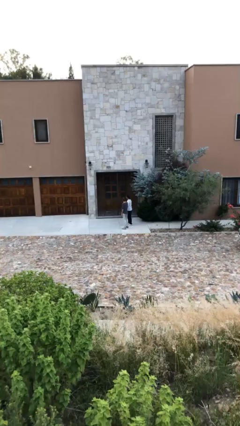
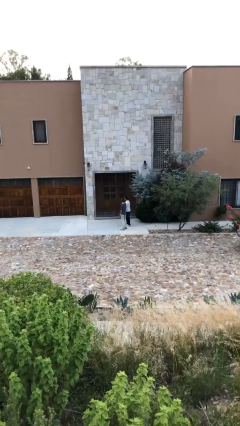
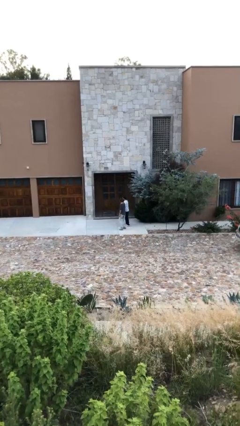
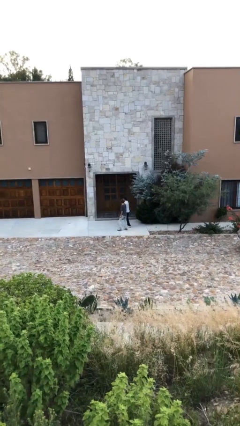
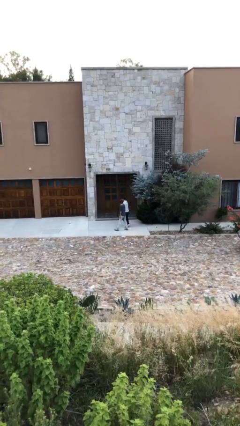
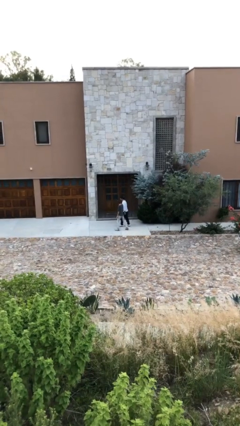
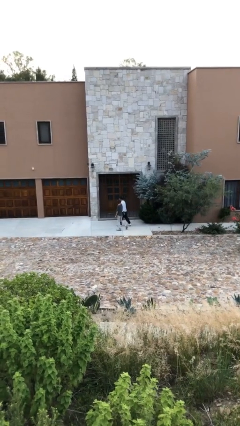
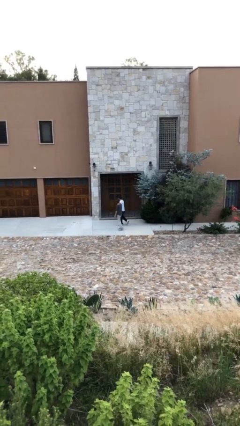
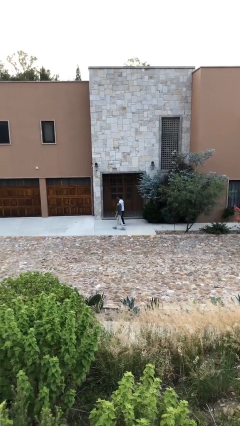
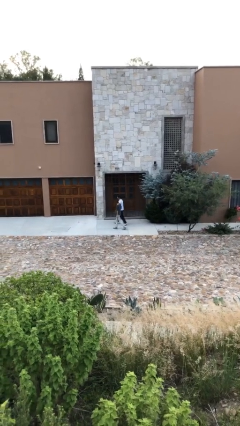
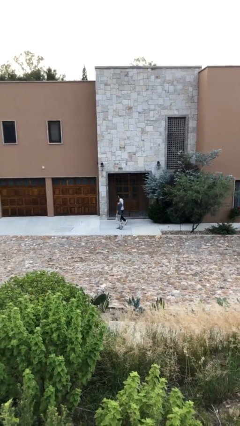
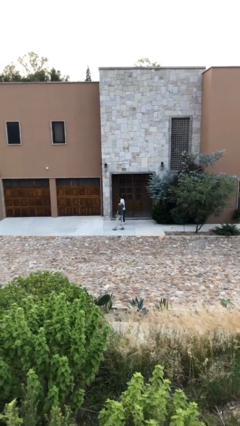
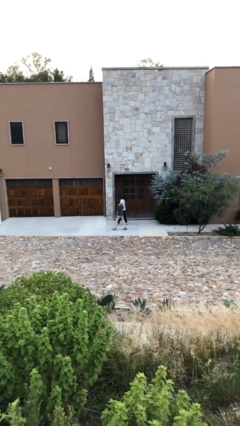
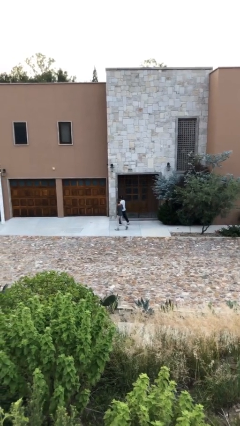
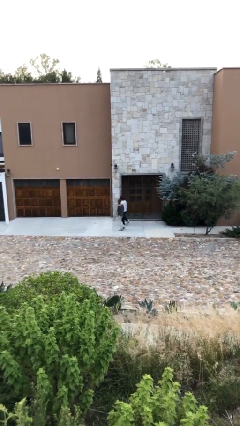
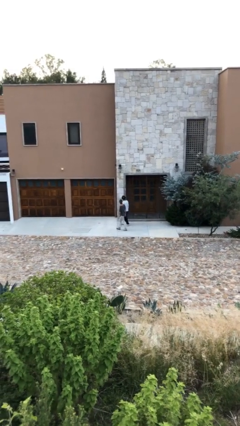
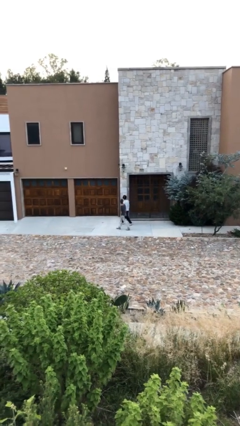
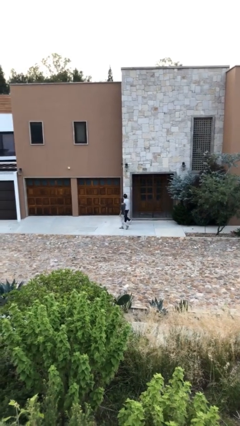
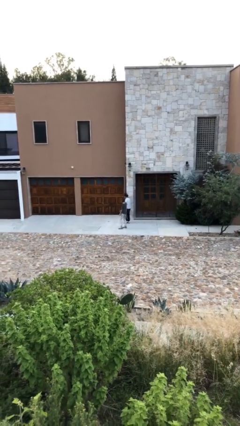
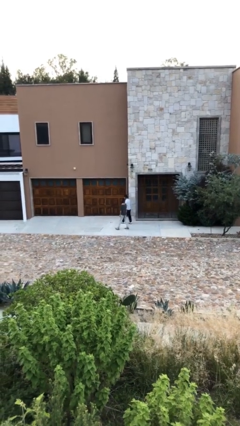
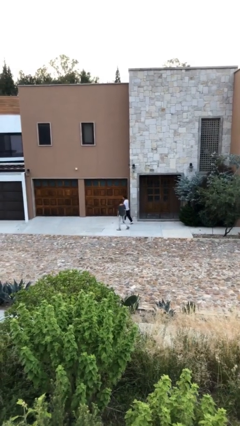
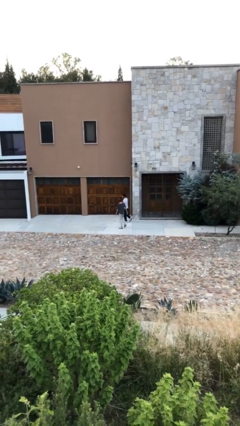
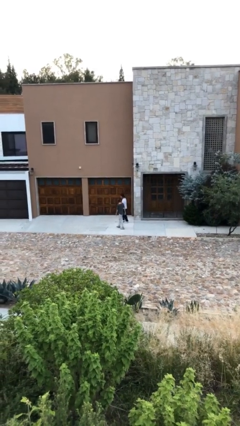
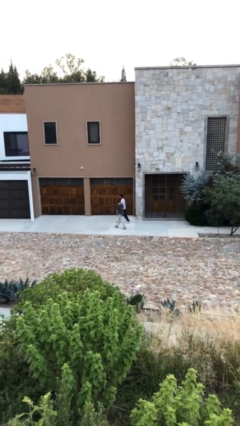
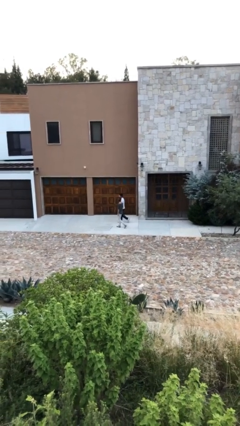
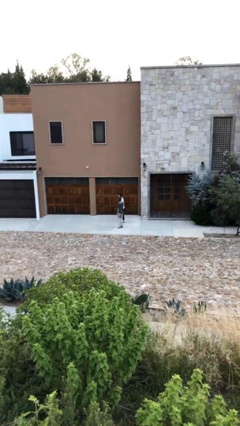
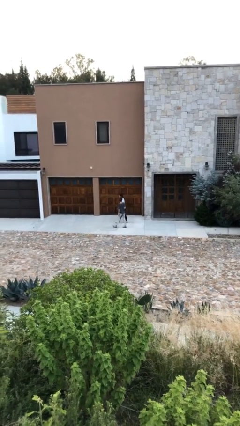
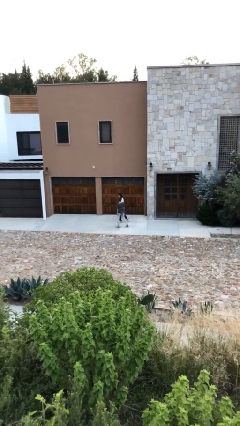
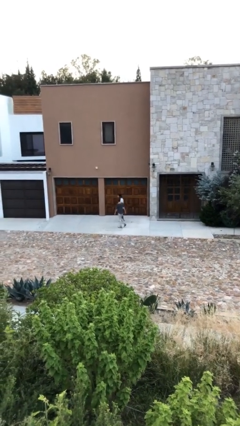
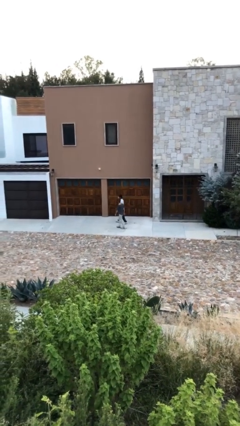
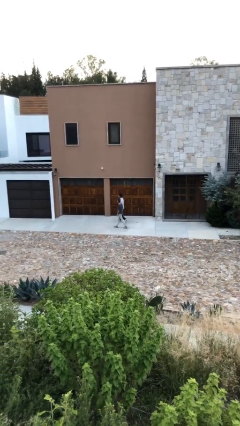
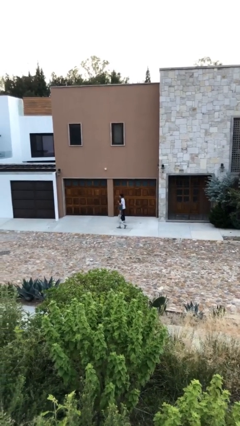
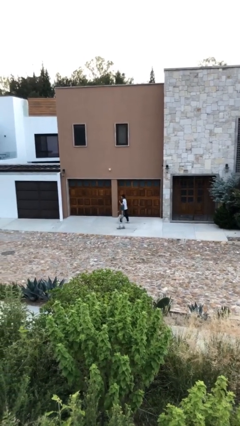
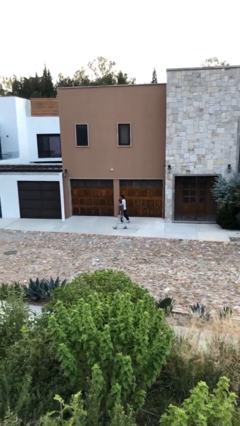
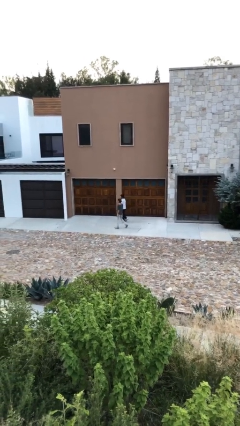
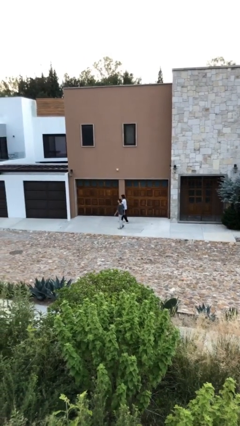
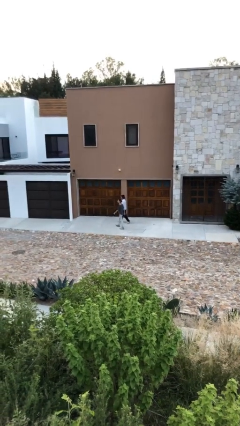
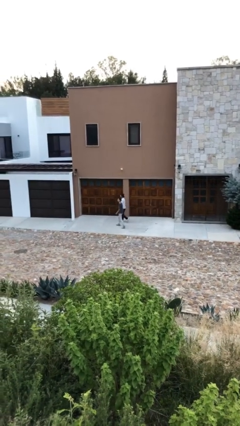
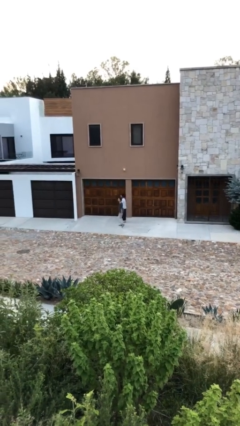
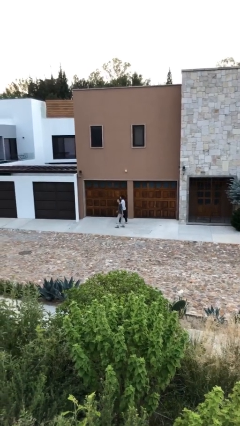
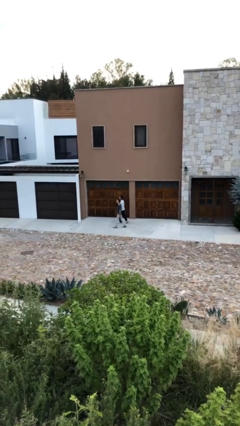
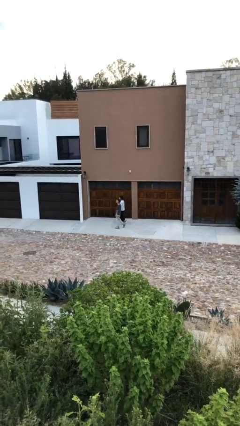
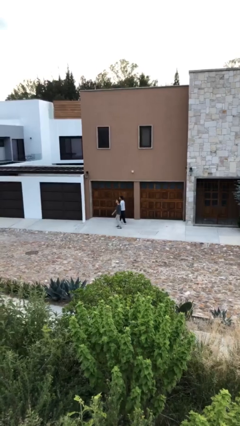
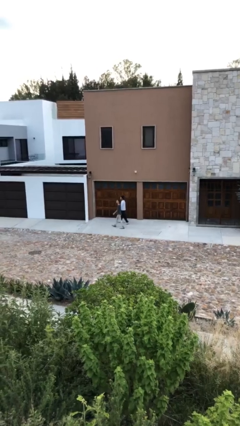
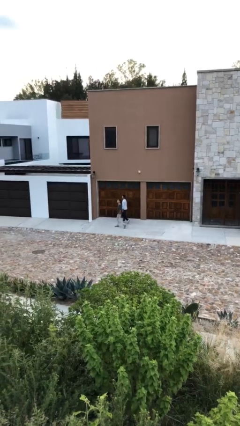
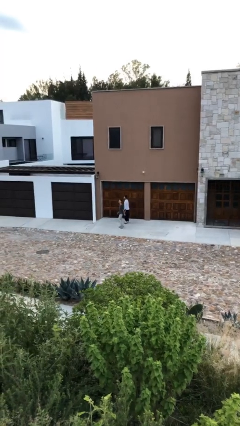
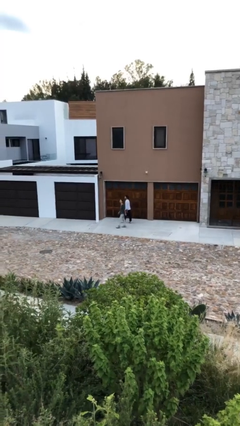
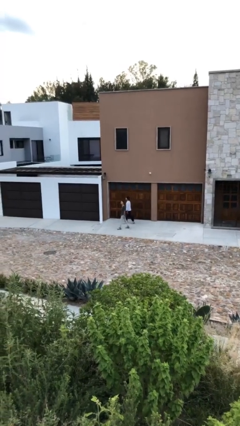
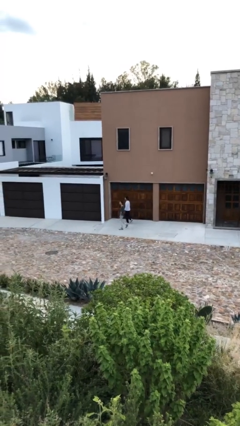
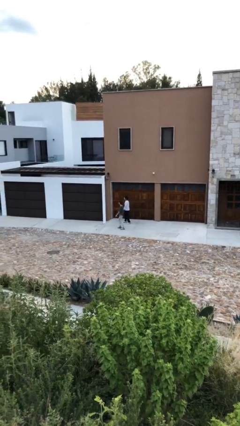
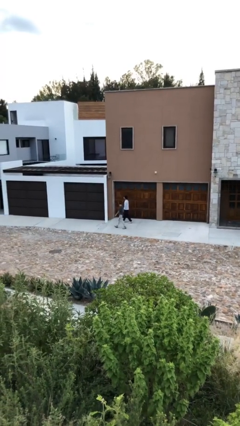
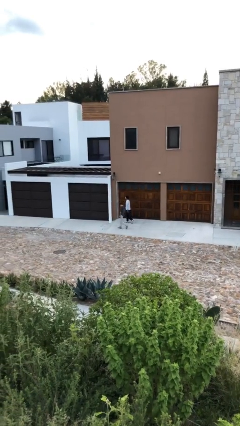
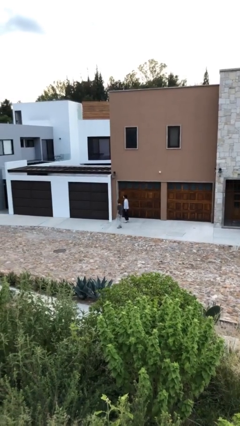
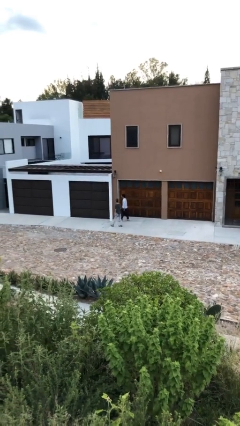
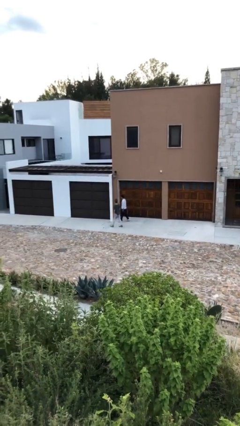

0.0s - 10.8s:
person talks to person

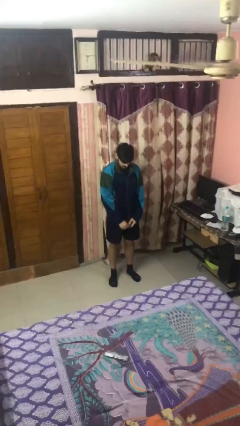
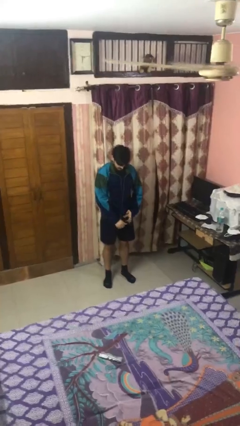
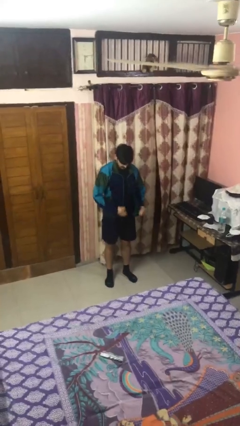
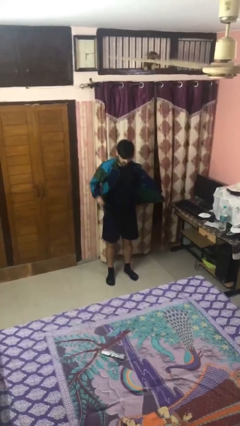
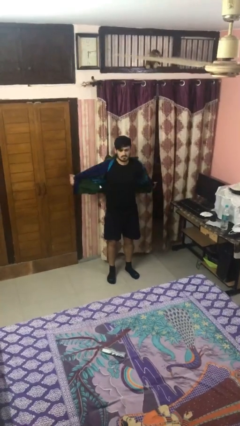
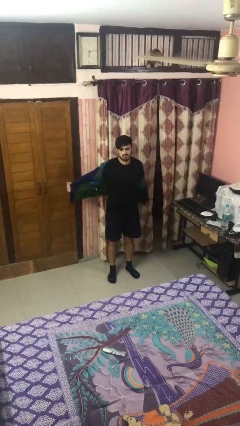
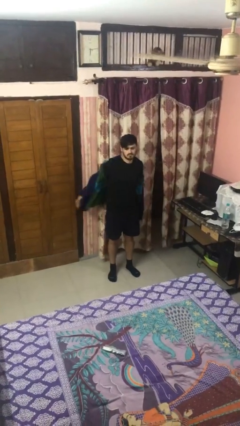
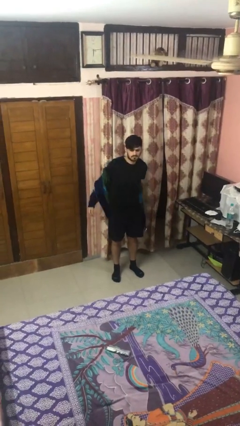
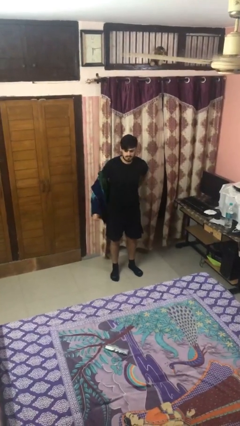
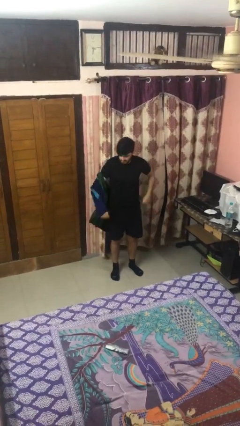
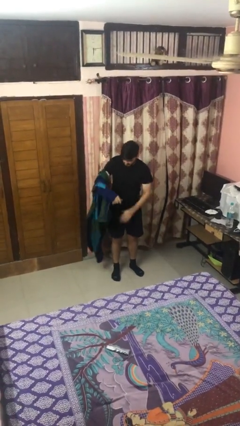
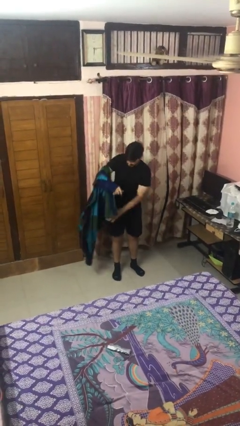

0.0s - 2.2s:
person takes off jacket

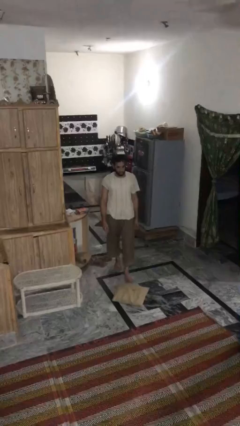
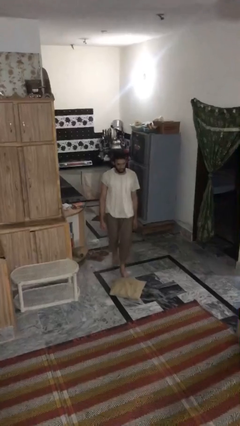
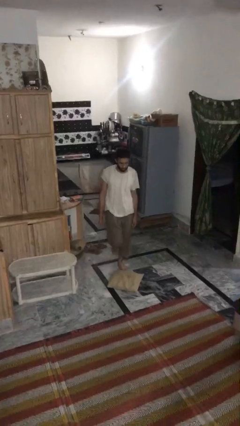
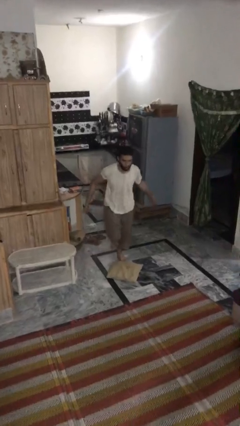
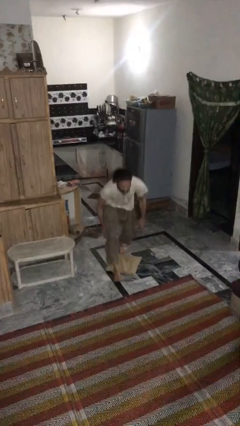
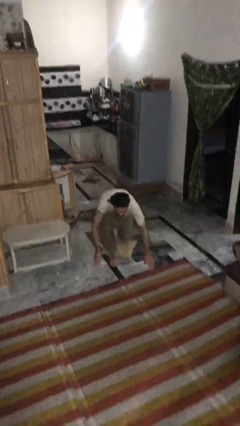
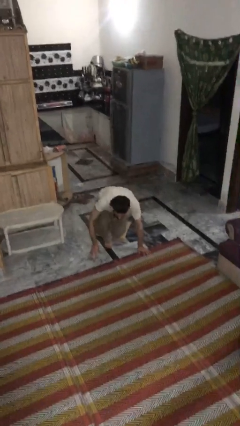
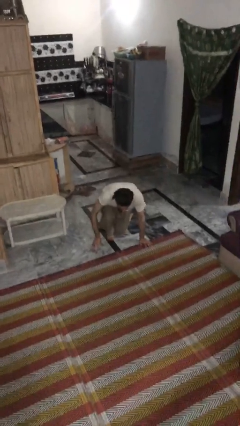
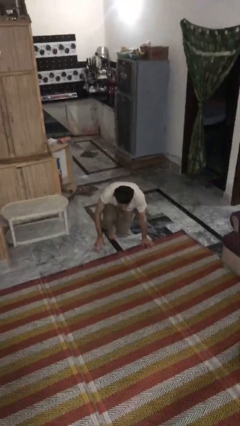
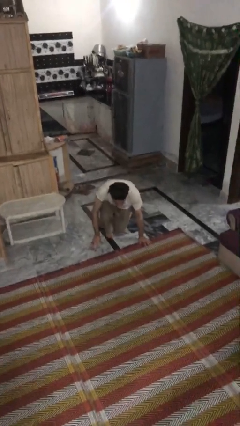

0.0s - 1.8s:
person trips on object on floor

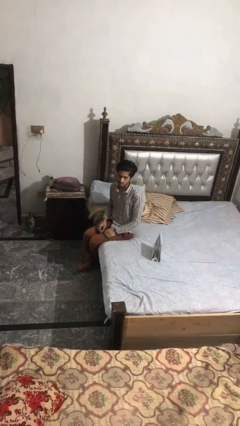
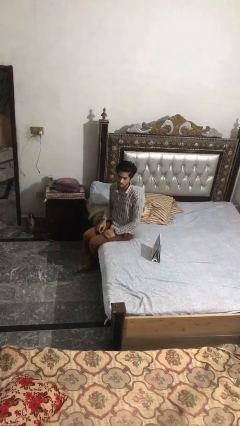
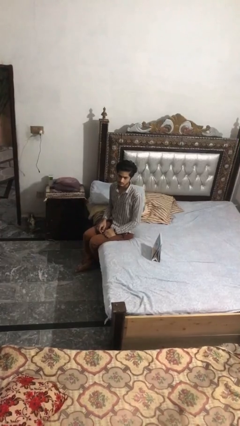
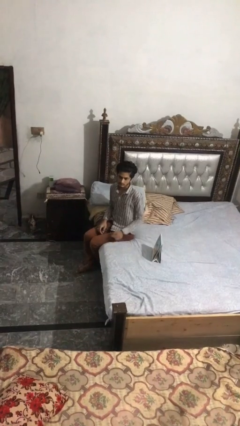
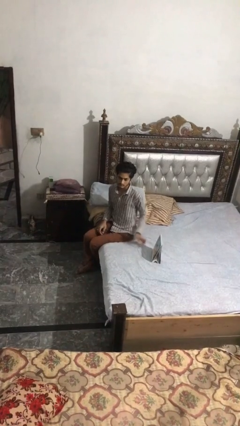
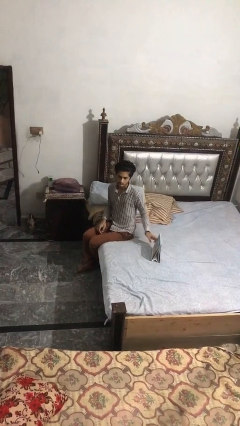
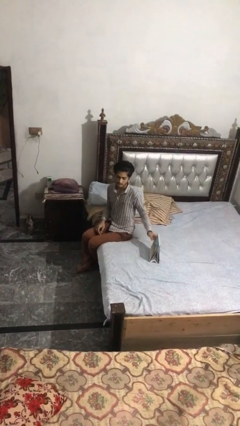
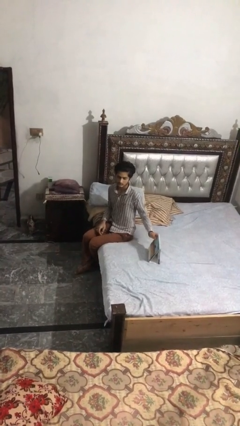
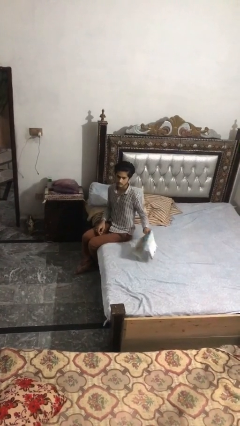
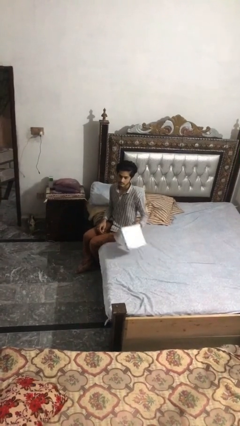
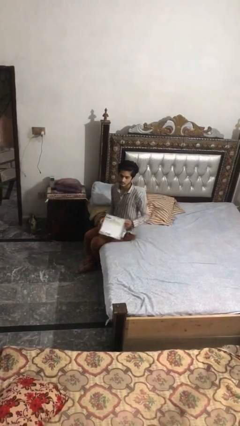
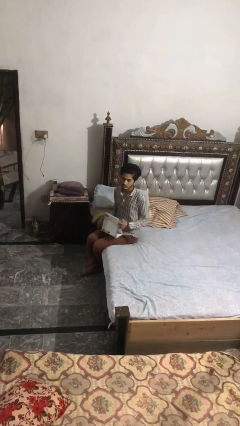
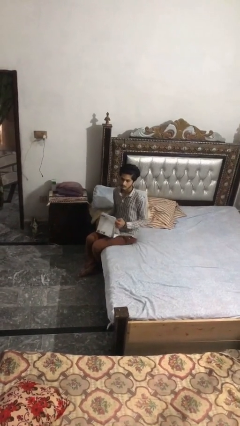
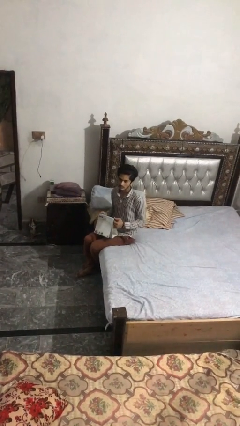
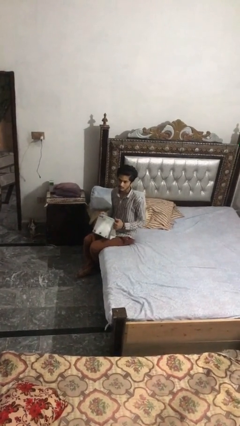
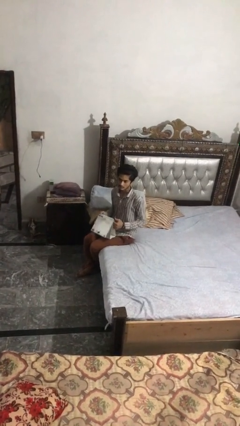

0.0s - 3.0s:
person picks up object from bed

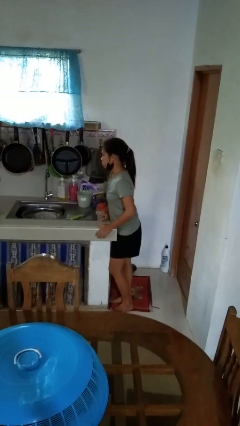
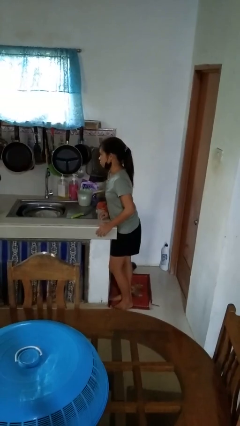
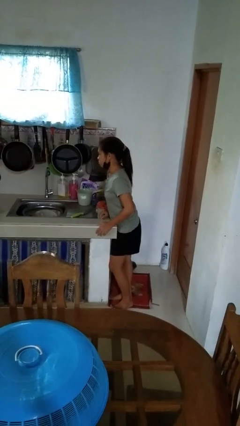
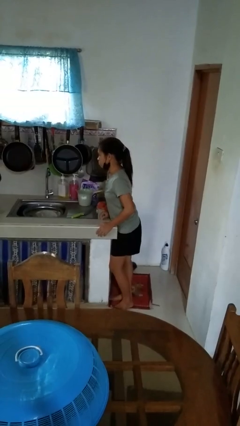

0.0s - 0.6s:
person turns off faucet
